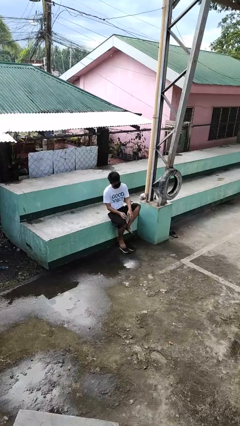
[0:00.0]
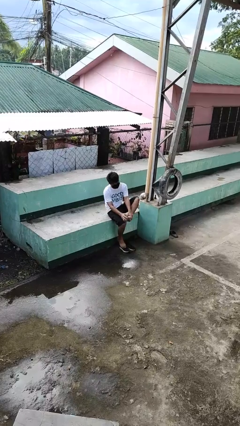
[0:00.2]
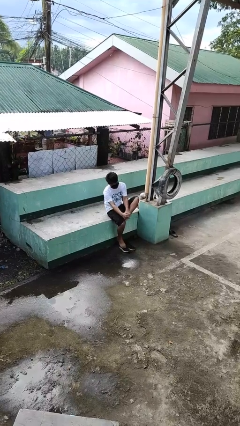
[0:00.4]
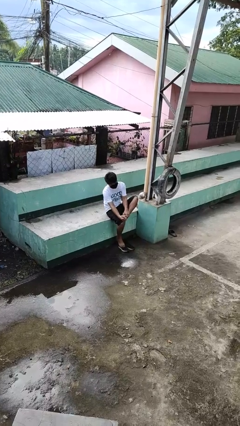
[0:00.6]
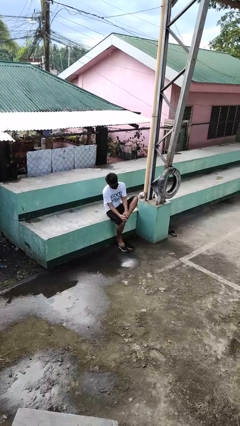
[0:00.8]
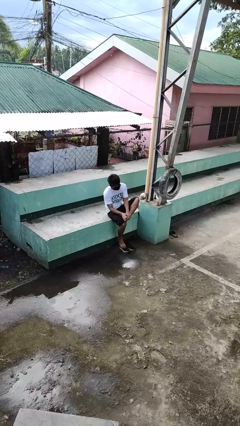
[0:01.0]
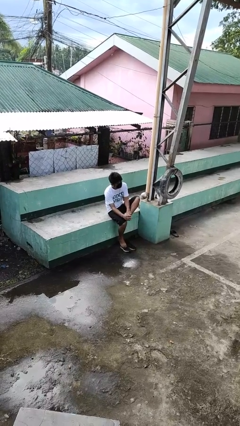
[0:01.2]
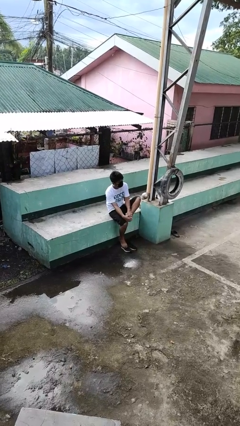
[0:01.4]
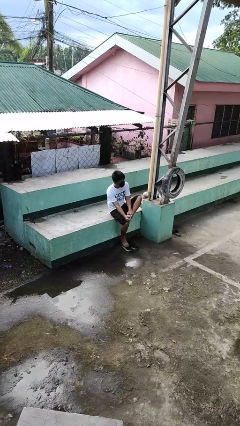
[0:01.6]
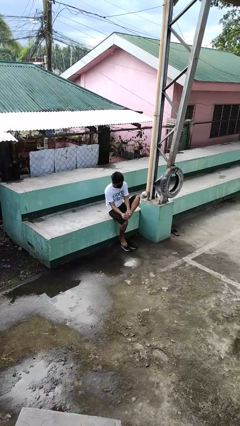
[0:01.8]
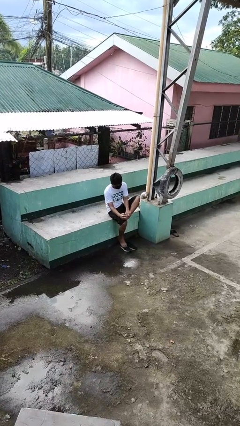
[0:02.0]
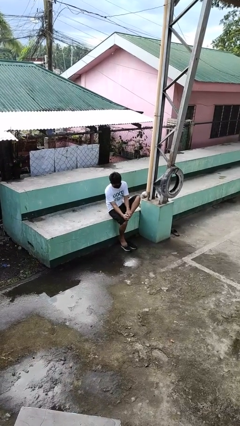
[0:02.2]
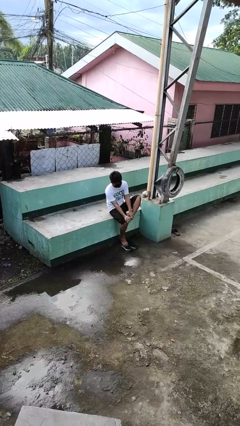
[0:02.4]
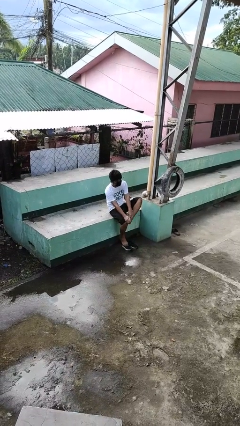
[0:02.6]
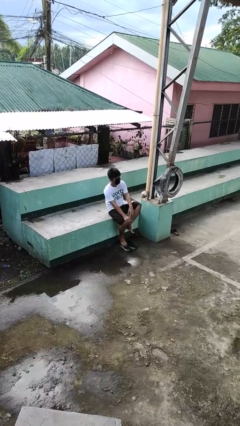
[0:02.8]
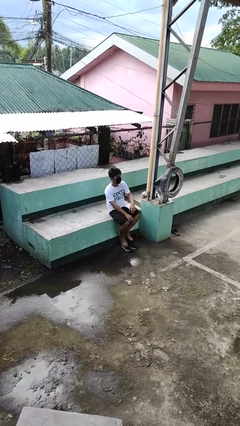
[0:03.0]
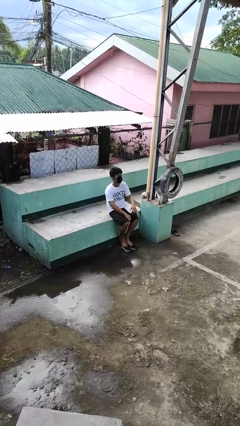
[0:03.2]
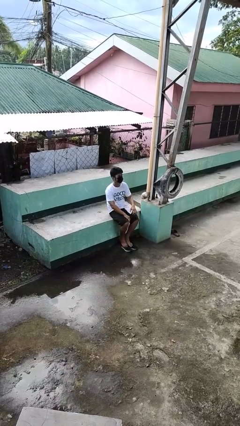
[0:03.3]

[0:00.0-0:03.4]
person rubs foot

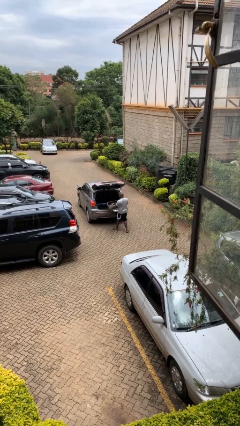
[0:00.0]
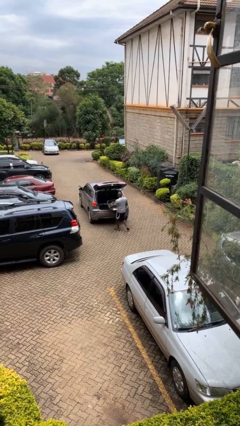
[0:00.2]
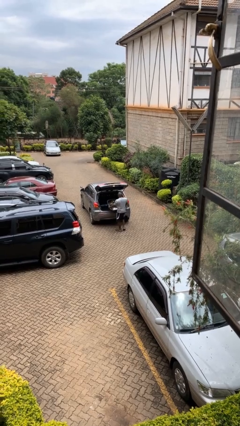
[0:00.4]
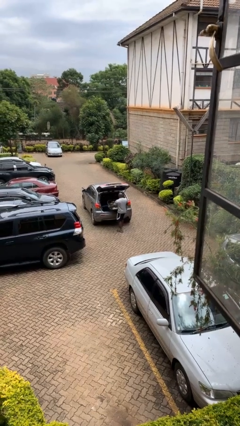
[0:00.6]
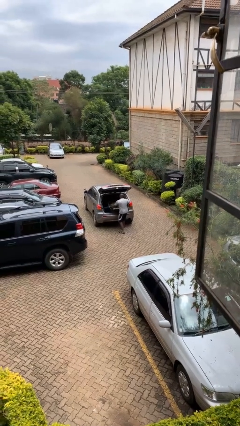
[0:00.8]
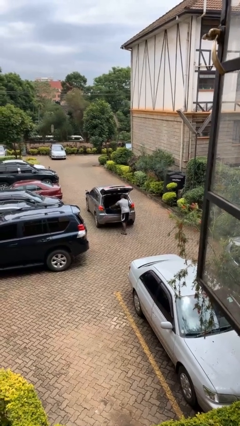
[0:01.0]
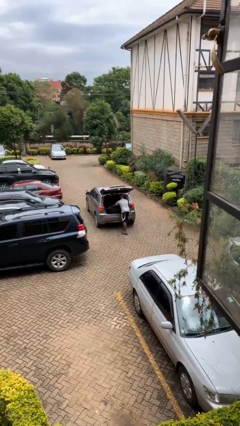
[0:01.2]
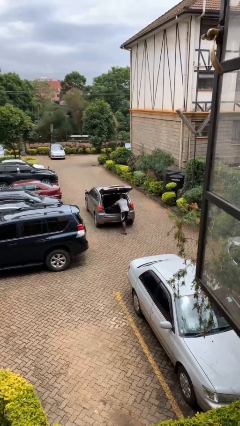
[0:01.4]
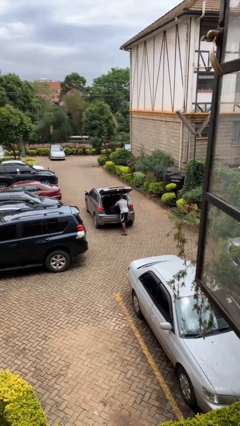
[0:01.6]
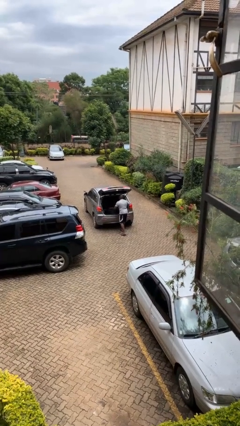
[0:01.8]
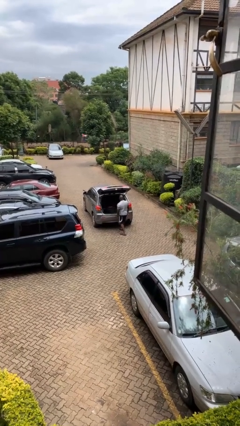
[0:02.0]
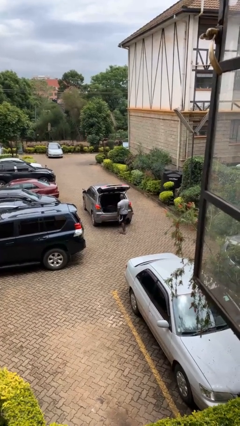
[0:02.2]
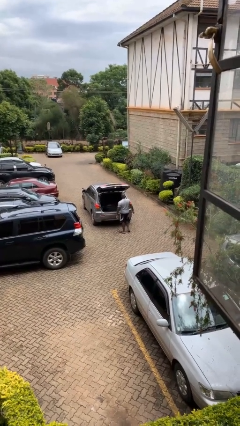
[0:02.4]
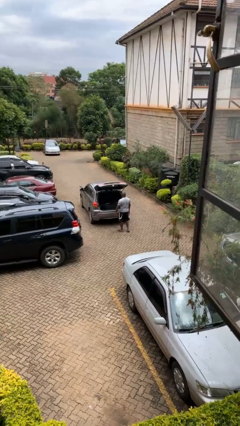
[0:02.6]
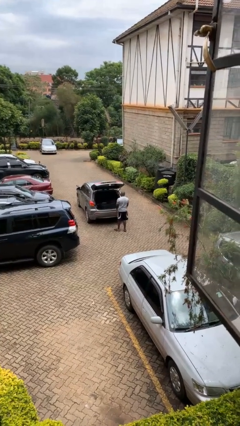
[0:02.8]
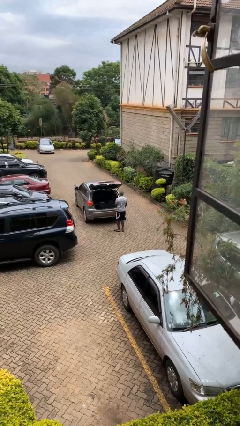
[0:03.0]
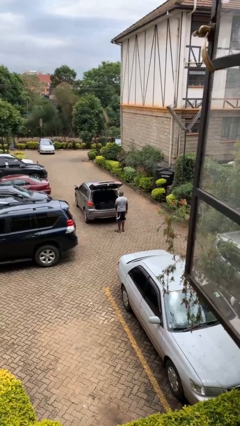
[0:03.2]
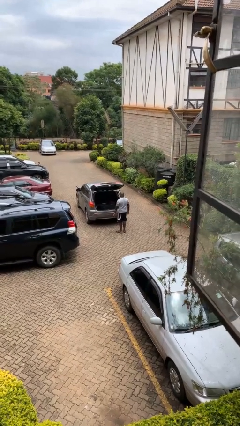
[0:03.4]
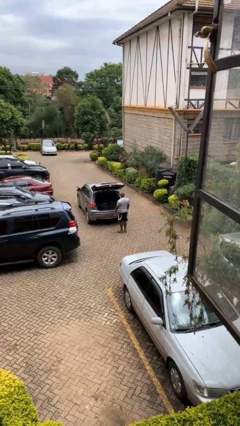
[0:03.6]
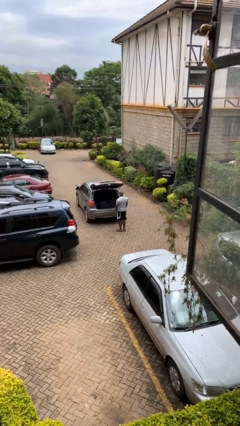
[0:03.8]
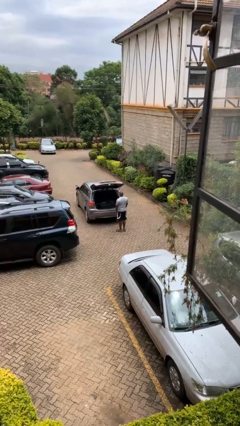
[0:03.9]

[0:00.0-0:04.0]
person loads car

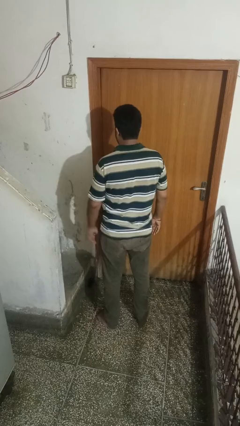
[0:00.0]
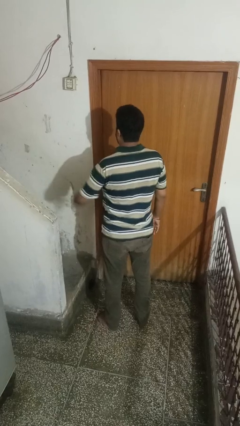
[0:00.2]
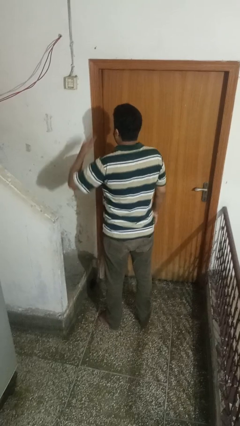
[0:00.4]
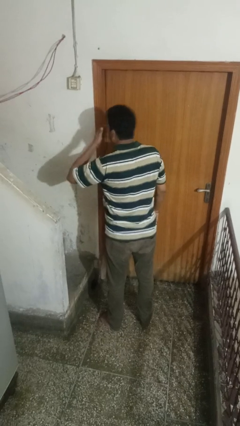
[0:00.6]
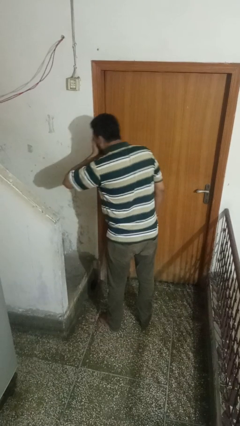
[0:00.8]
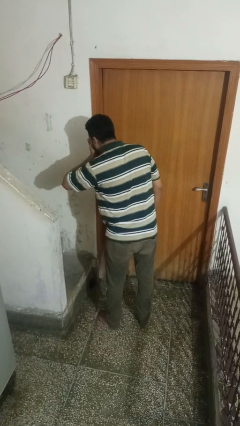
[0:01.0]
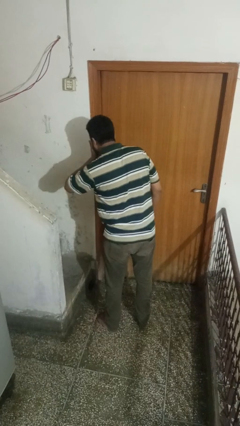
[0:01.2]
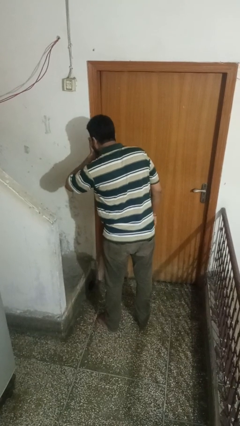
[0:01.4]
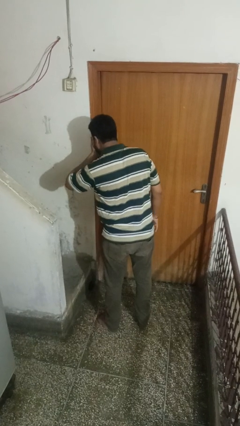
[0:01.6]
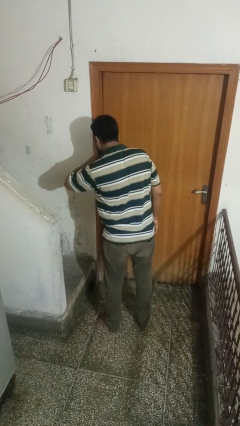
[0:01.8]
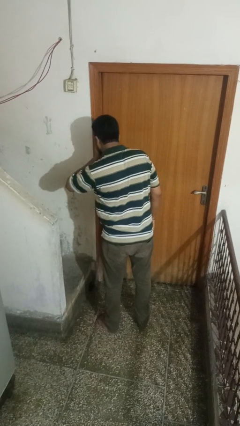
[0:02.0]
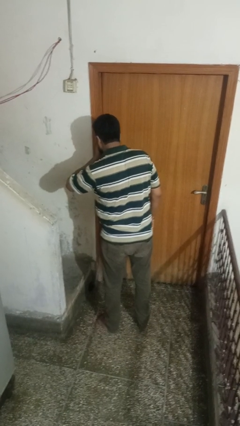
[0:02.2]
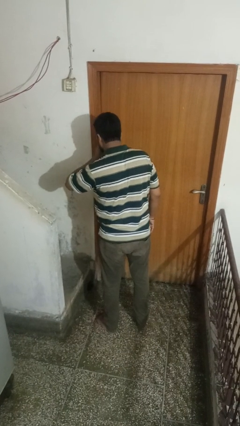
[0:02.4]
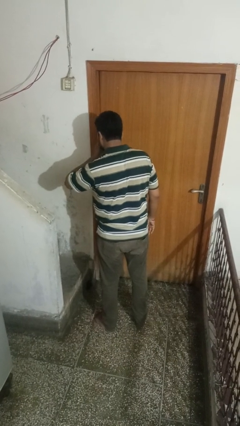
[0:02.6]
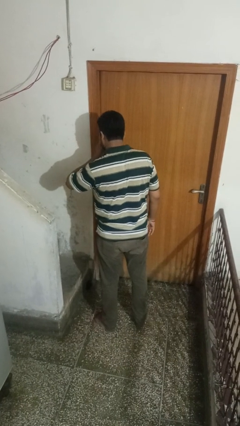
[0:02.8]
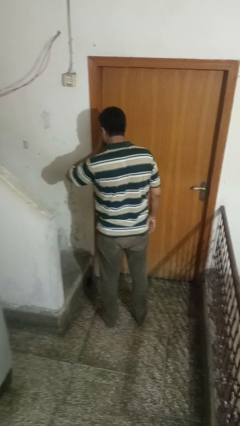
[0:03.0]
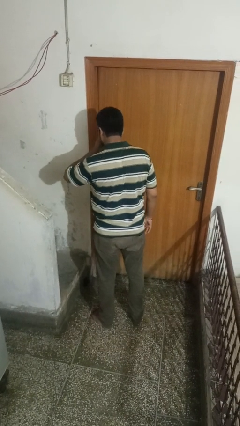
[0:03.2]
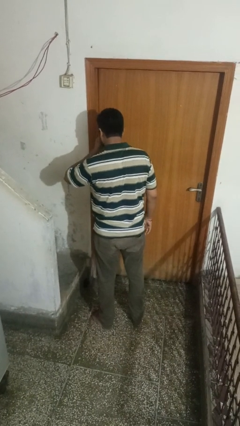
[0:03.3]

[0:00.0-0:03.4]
person sneezes into hand

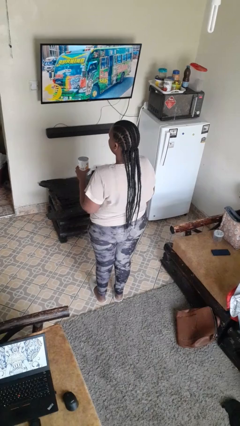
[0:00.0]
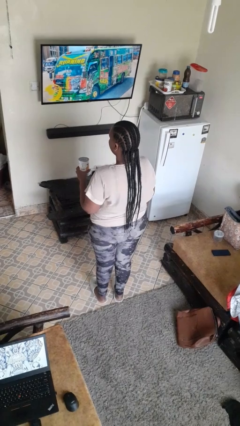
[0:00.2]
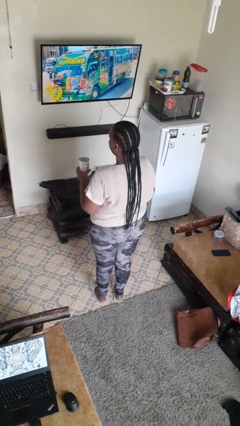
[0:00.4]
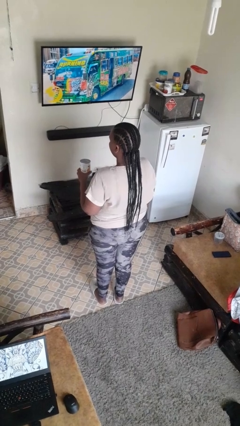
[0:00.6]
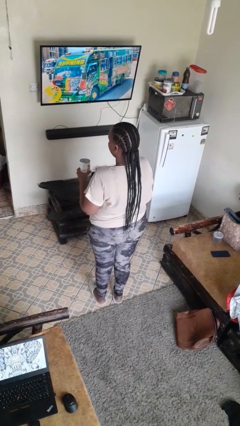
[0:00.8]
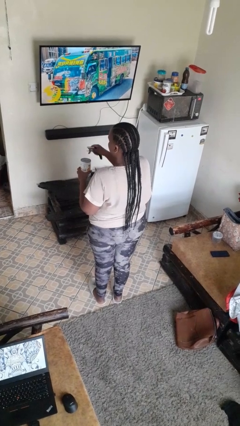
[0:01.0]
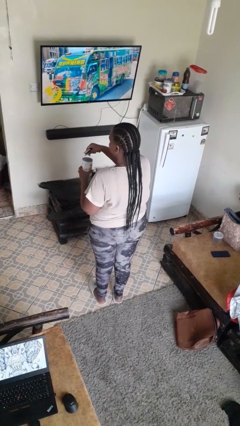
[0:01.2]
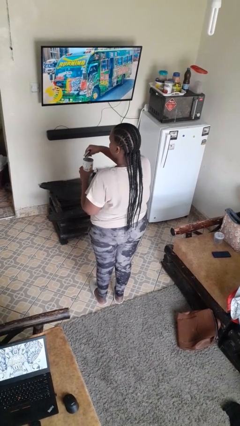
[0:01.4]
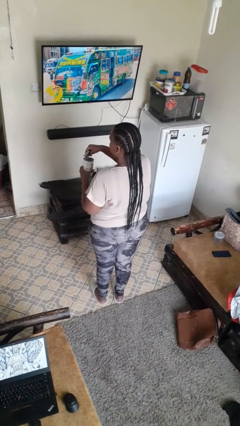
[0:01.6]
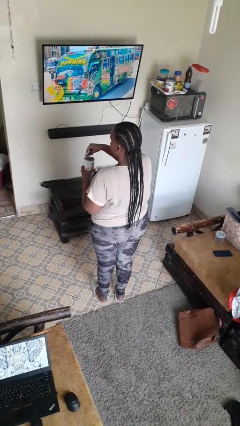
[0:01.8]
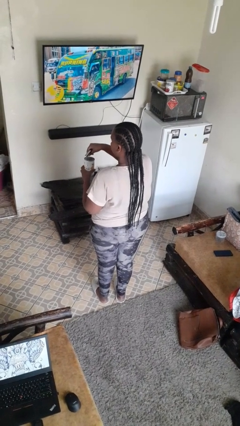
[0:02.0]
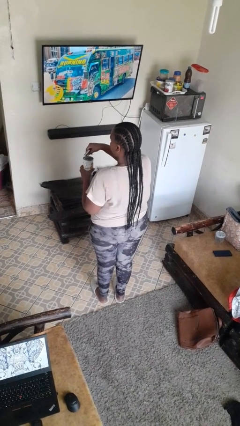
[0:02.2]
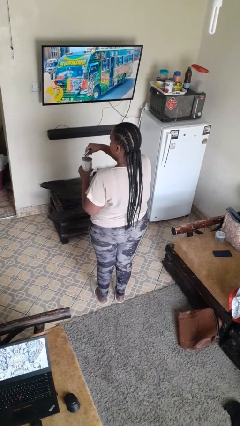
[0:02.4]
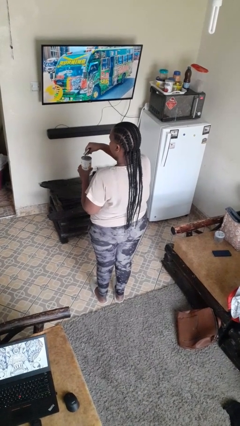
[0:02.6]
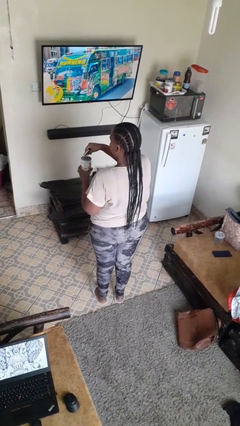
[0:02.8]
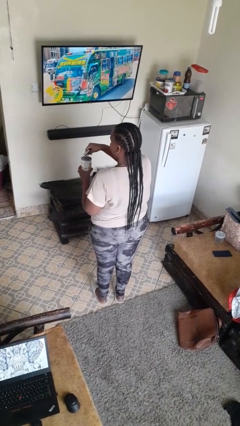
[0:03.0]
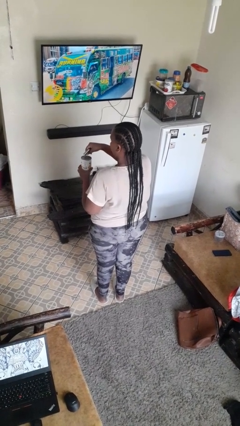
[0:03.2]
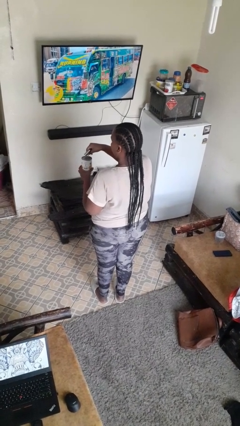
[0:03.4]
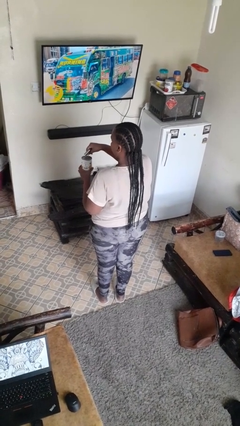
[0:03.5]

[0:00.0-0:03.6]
person opens can with can opener

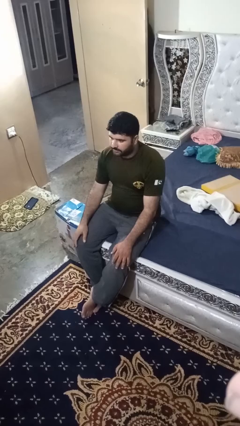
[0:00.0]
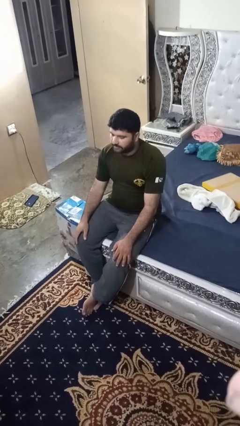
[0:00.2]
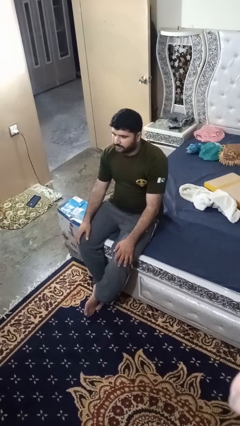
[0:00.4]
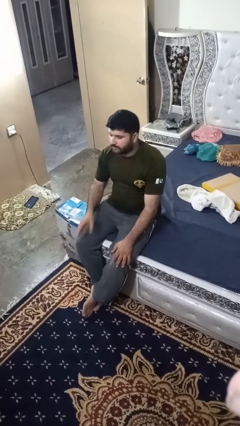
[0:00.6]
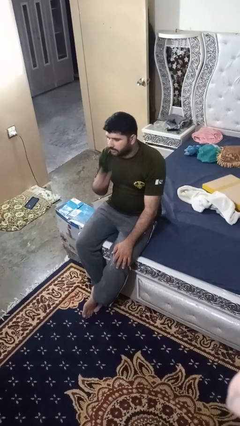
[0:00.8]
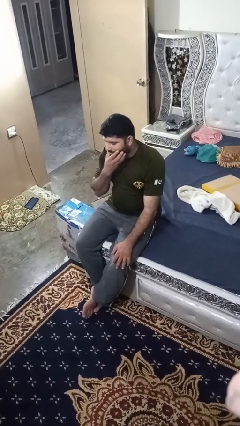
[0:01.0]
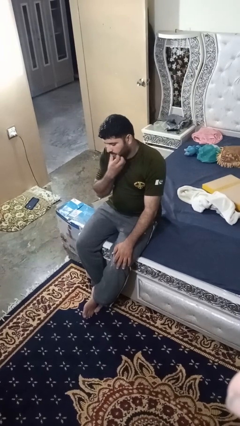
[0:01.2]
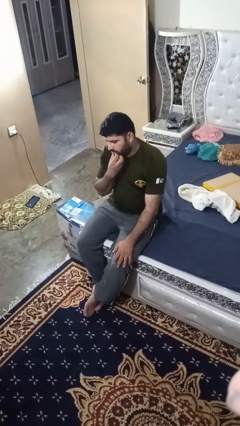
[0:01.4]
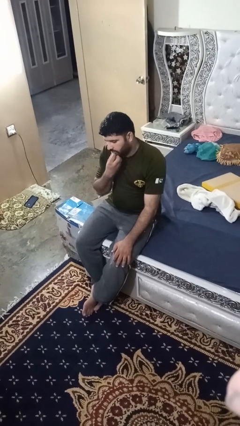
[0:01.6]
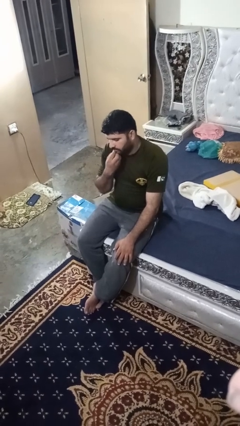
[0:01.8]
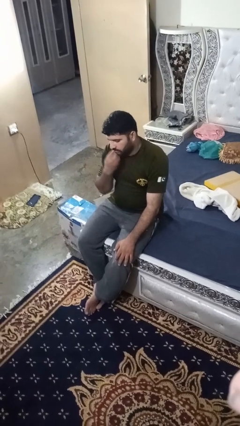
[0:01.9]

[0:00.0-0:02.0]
person strokes chin

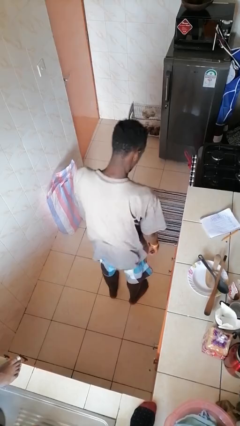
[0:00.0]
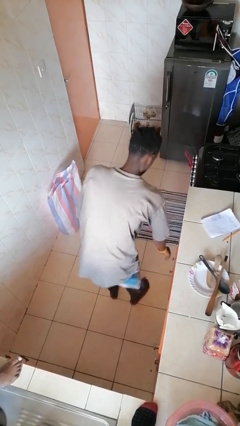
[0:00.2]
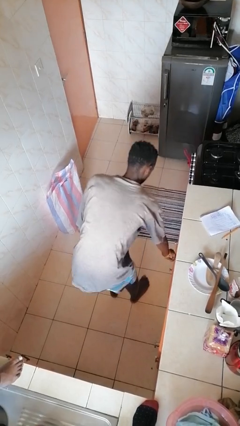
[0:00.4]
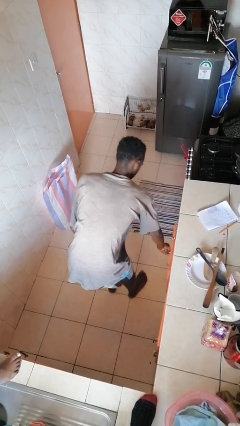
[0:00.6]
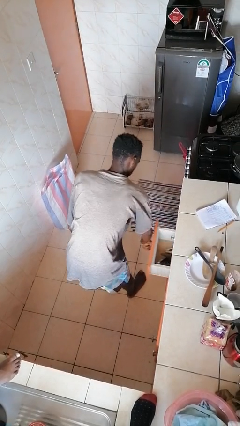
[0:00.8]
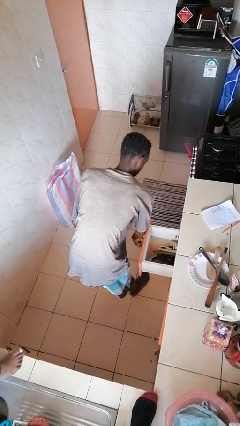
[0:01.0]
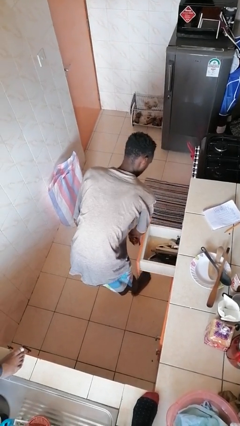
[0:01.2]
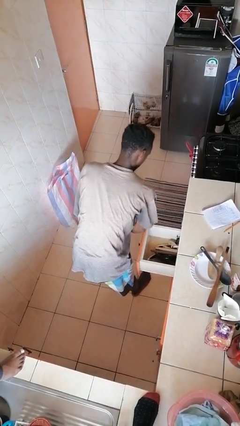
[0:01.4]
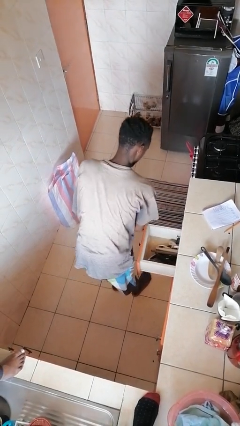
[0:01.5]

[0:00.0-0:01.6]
person opens kitchen drawer
